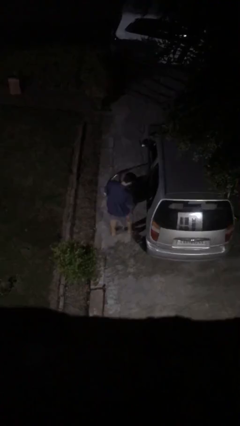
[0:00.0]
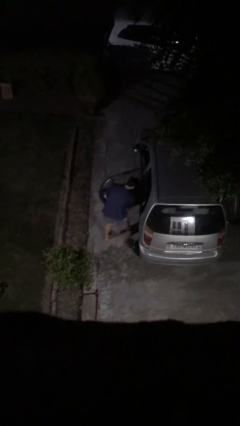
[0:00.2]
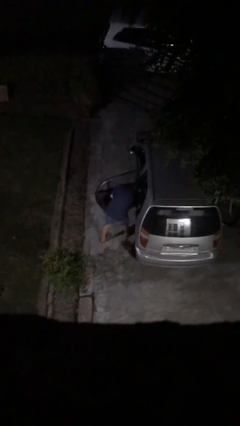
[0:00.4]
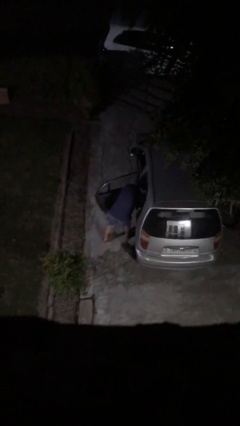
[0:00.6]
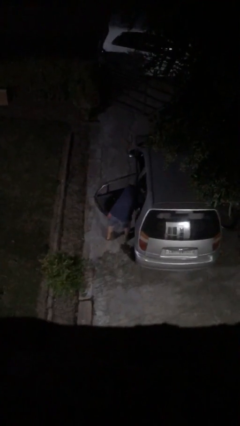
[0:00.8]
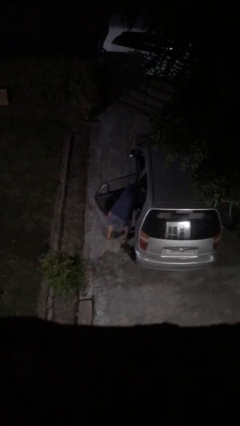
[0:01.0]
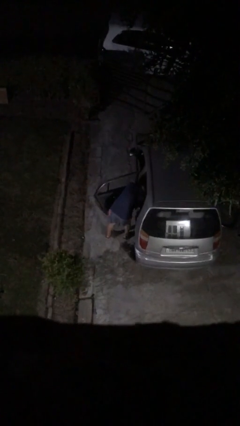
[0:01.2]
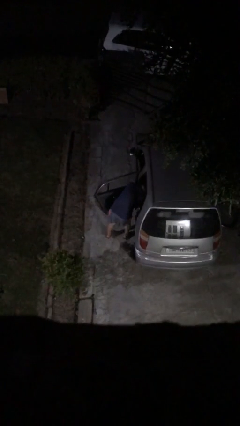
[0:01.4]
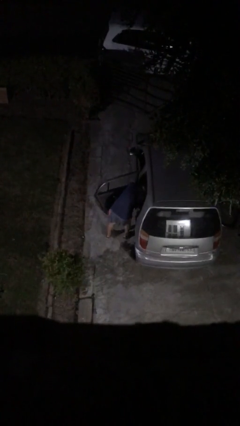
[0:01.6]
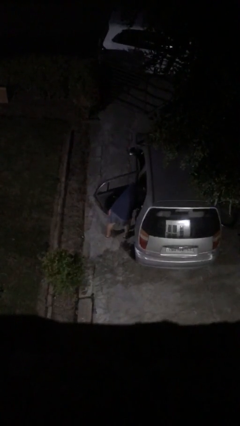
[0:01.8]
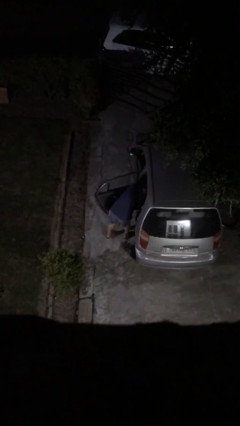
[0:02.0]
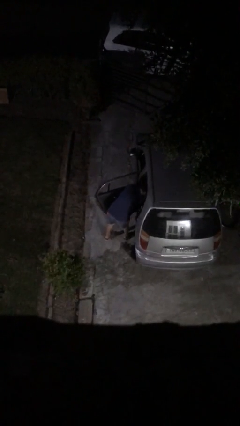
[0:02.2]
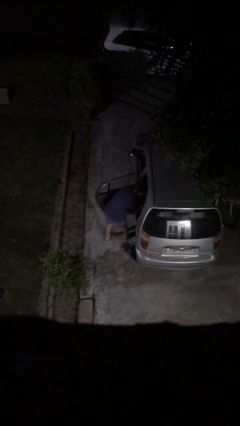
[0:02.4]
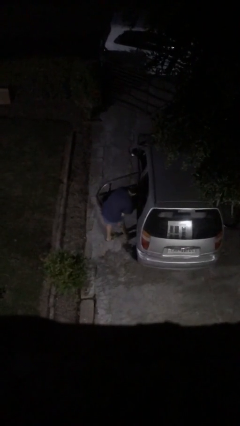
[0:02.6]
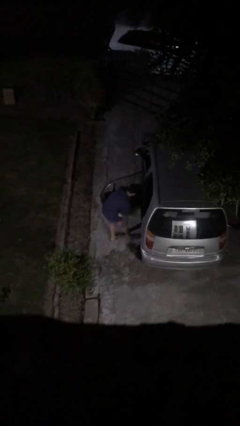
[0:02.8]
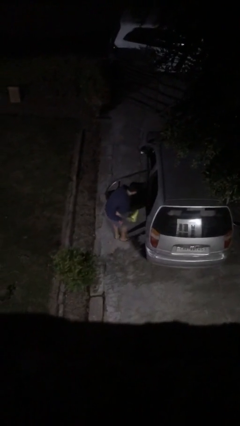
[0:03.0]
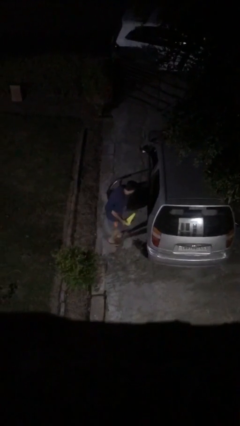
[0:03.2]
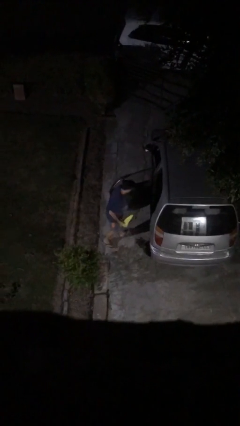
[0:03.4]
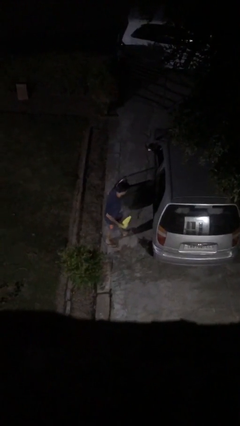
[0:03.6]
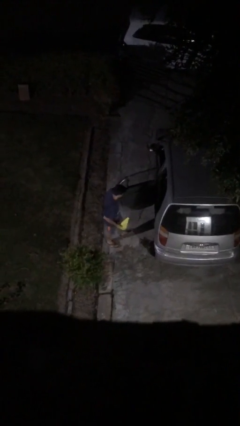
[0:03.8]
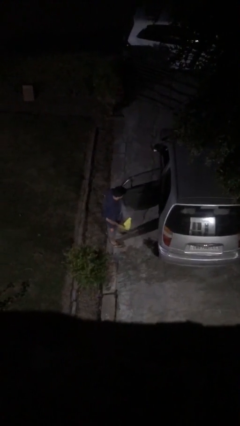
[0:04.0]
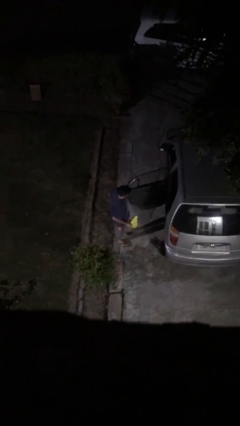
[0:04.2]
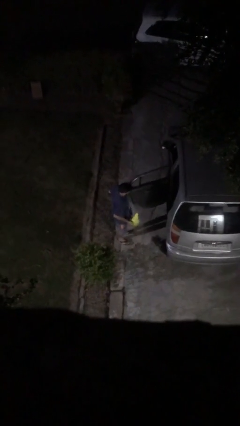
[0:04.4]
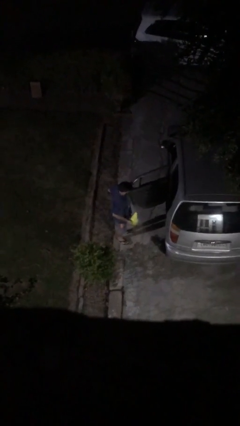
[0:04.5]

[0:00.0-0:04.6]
person unloads car

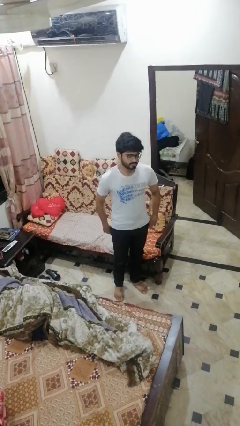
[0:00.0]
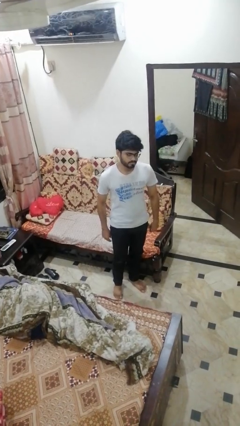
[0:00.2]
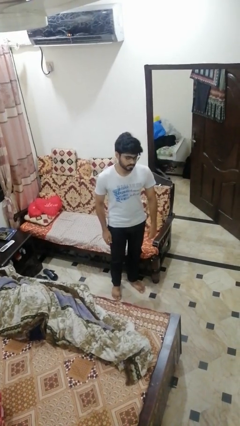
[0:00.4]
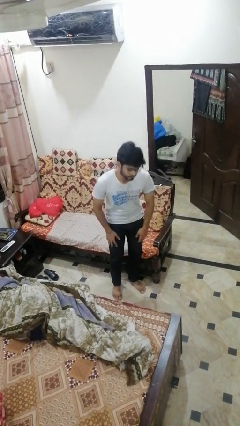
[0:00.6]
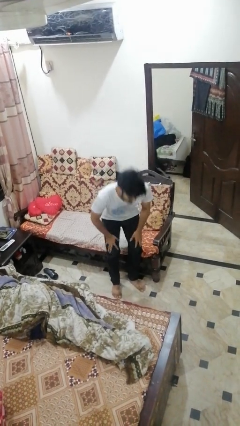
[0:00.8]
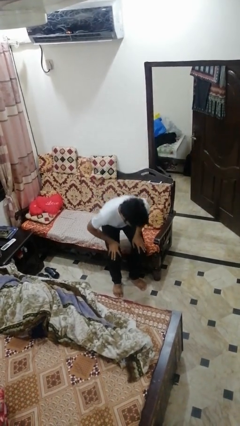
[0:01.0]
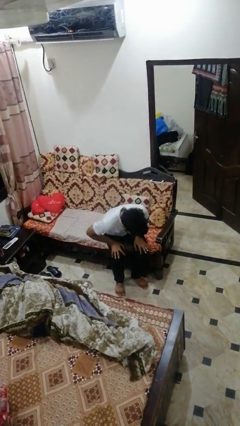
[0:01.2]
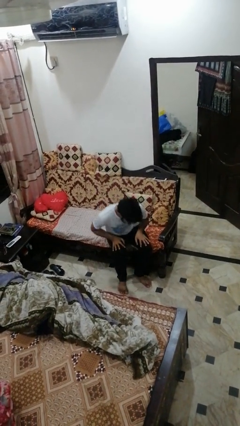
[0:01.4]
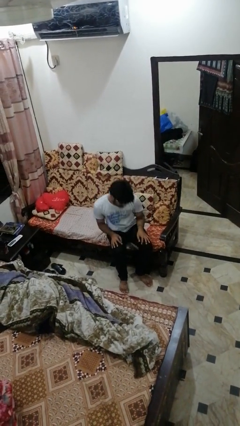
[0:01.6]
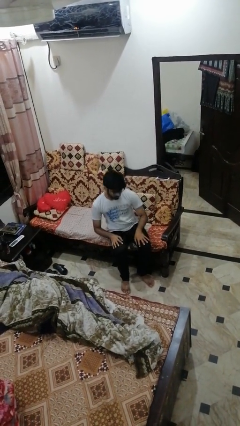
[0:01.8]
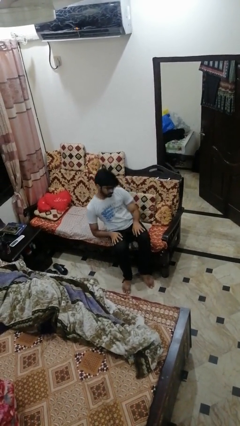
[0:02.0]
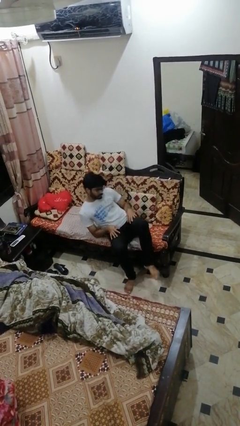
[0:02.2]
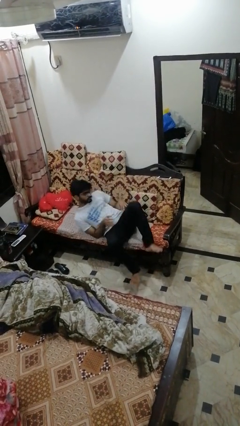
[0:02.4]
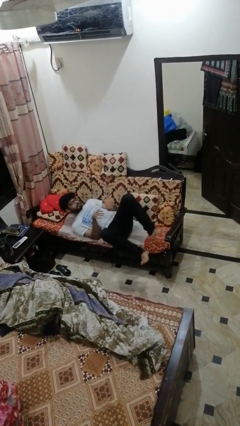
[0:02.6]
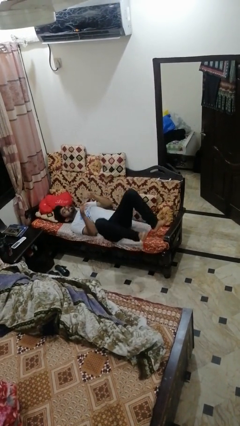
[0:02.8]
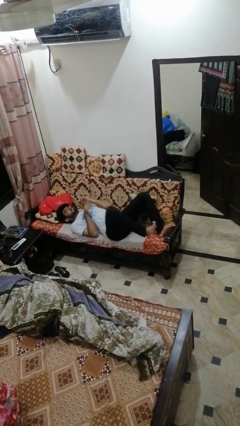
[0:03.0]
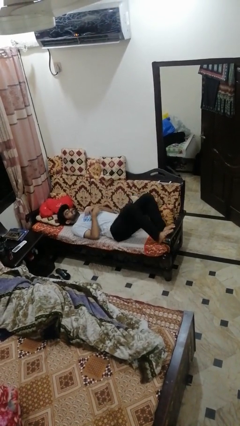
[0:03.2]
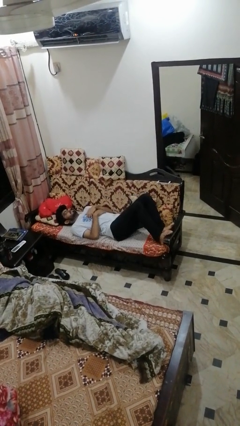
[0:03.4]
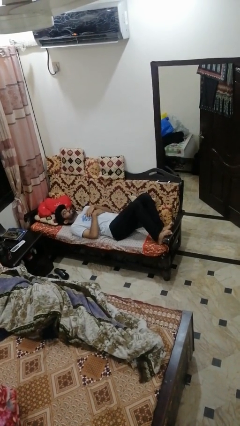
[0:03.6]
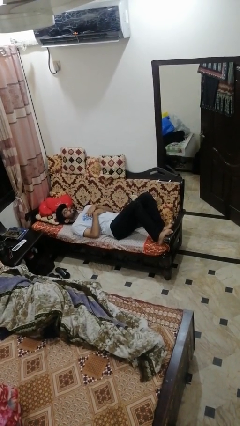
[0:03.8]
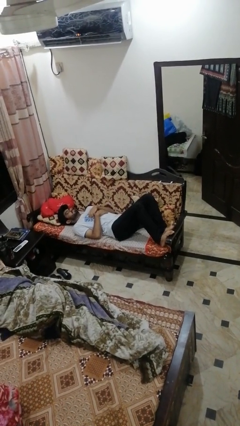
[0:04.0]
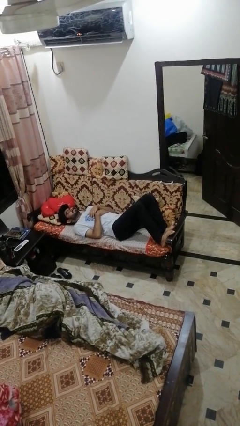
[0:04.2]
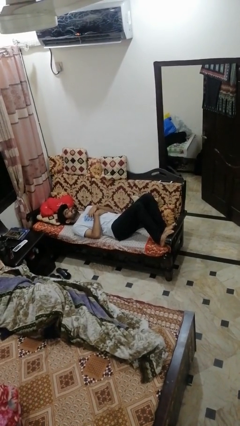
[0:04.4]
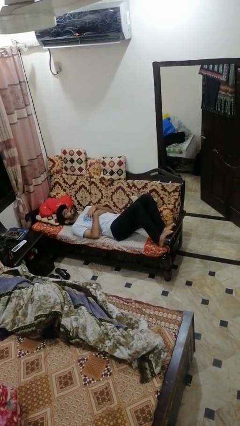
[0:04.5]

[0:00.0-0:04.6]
person lies down on couch

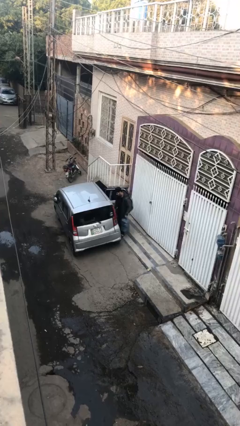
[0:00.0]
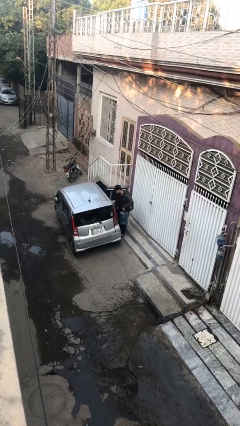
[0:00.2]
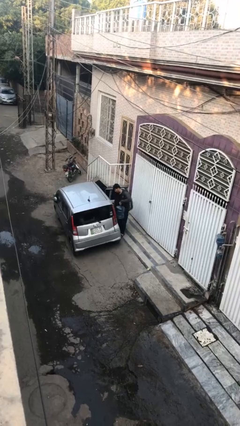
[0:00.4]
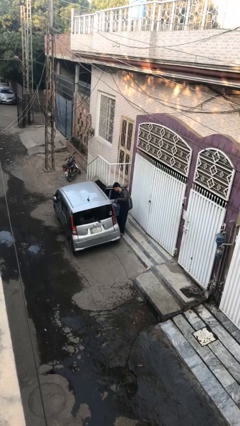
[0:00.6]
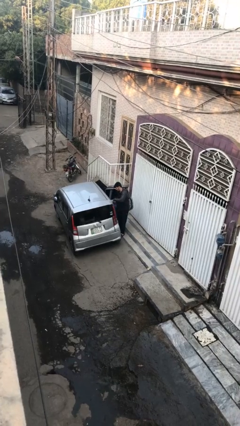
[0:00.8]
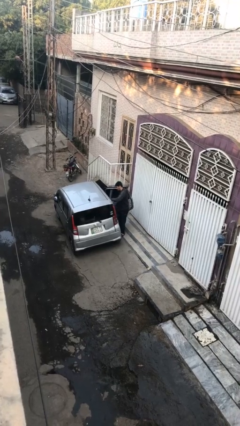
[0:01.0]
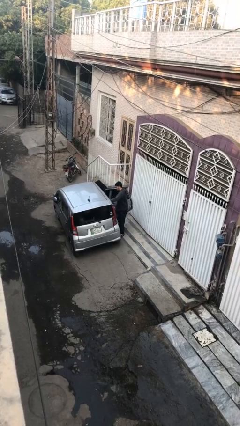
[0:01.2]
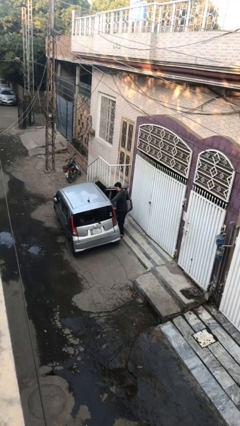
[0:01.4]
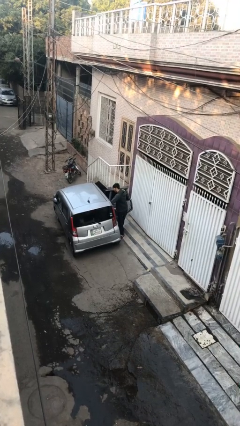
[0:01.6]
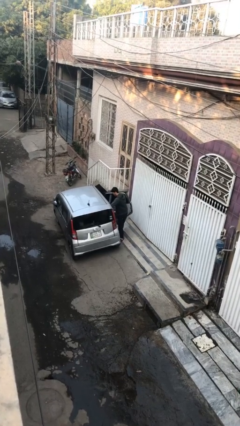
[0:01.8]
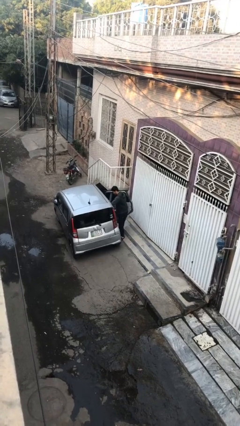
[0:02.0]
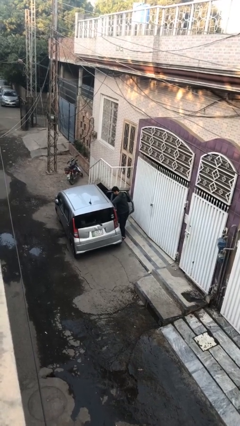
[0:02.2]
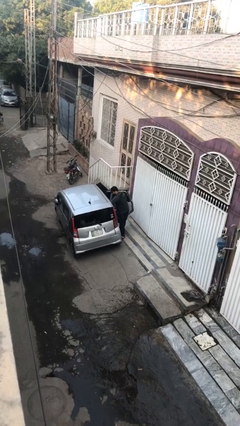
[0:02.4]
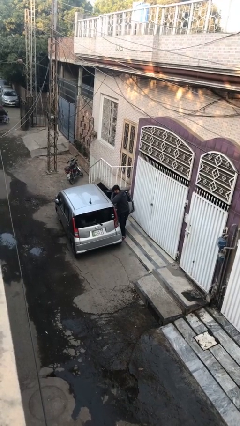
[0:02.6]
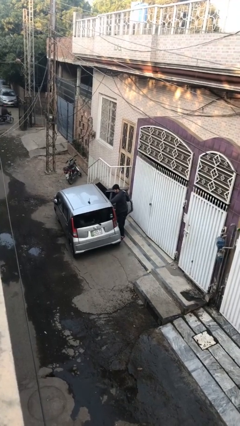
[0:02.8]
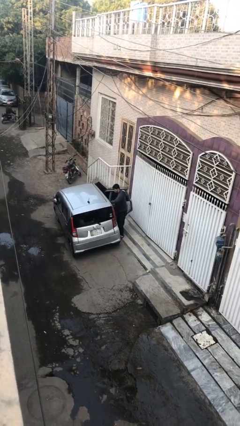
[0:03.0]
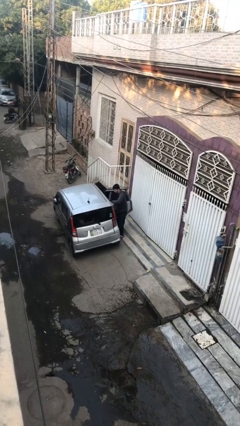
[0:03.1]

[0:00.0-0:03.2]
person loads car

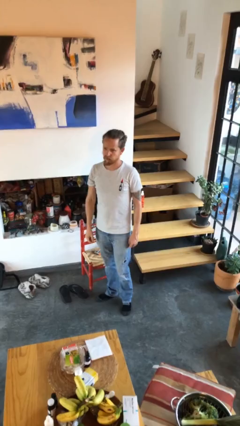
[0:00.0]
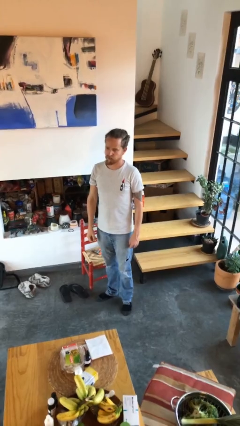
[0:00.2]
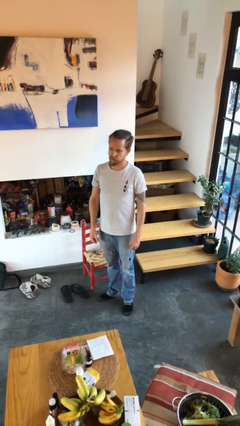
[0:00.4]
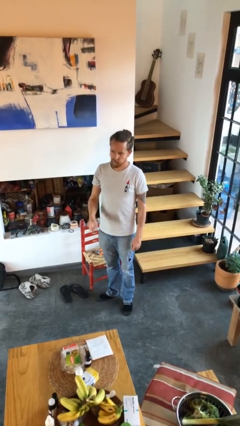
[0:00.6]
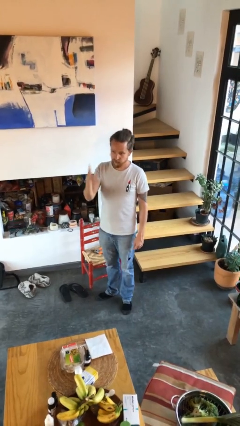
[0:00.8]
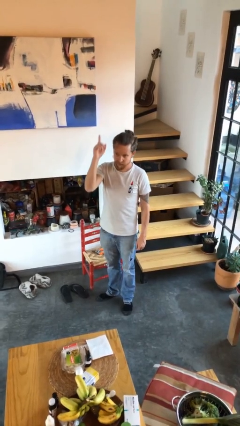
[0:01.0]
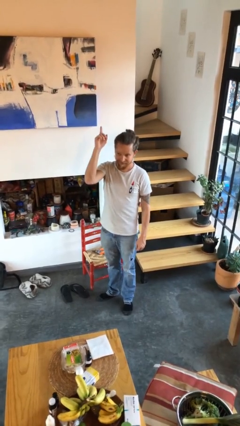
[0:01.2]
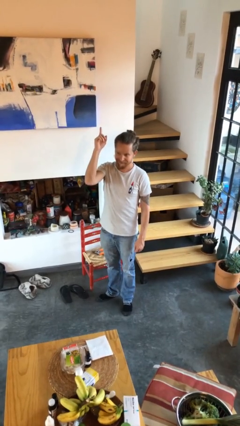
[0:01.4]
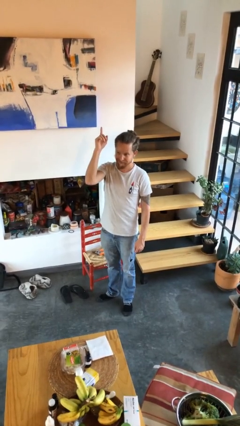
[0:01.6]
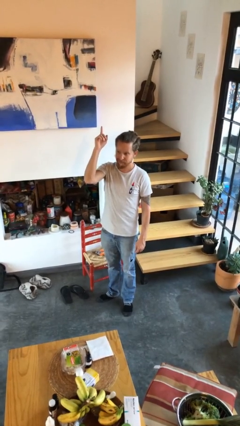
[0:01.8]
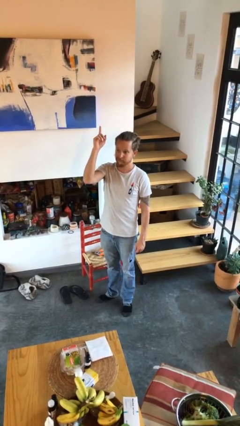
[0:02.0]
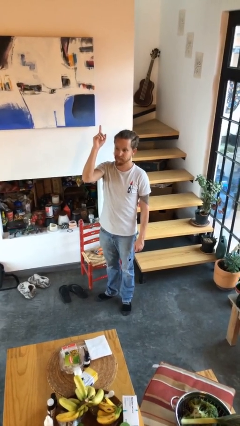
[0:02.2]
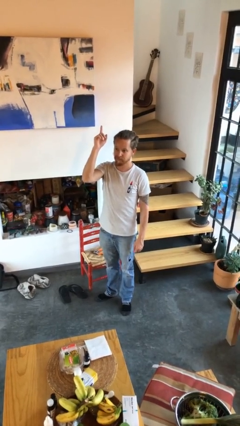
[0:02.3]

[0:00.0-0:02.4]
person gestures raise hand

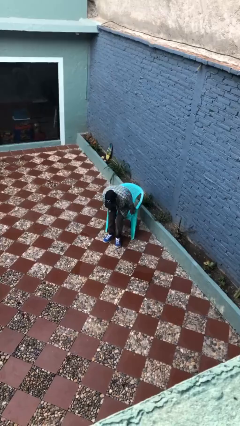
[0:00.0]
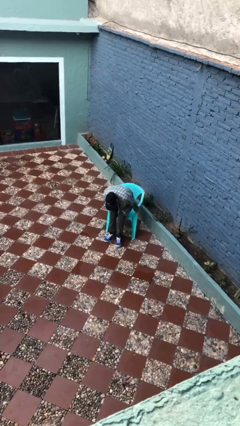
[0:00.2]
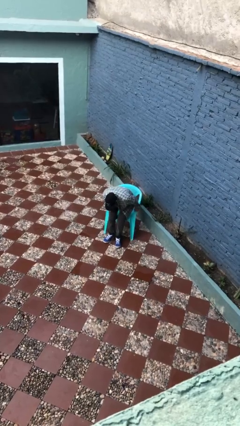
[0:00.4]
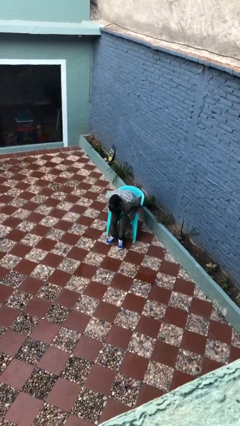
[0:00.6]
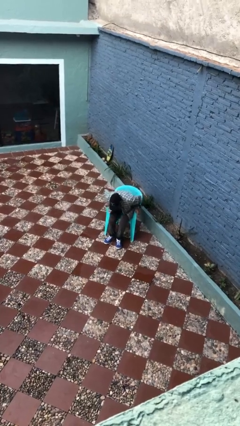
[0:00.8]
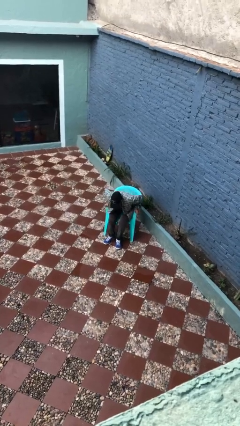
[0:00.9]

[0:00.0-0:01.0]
person sits down

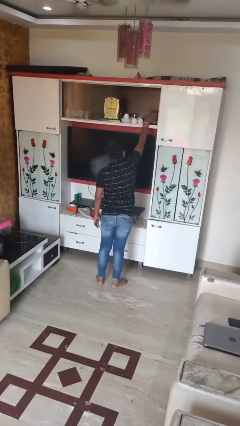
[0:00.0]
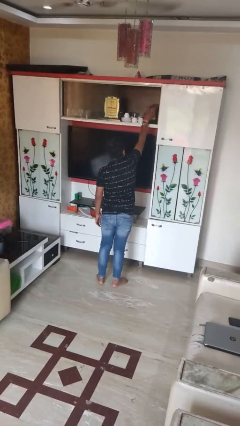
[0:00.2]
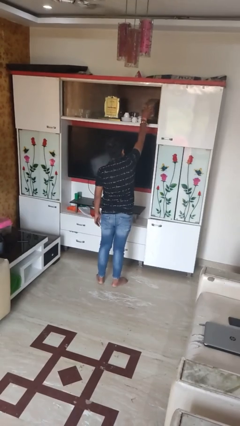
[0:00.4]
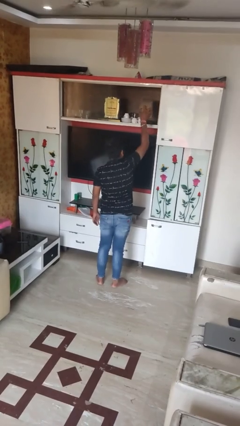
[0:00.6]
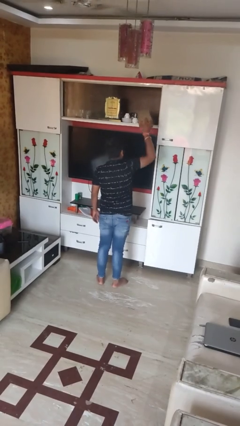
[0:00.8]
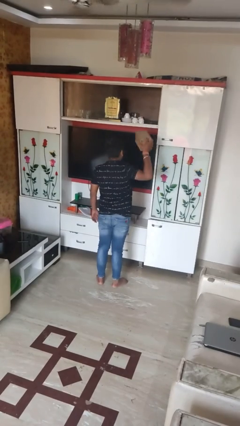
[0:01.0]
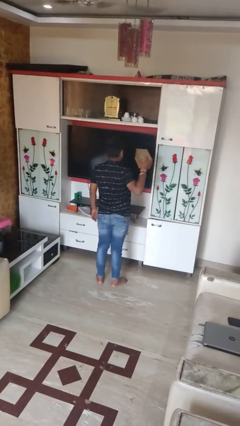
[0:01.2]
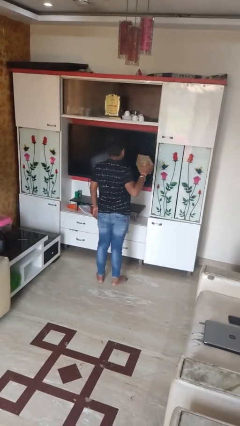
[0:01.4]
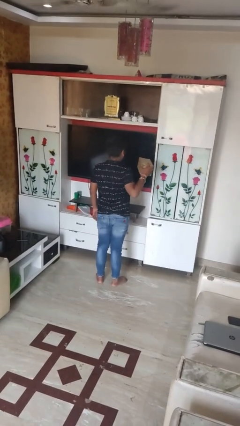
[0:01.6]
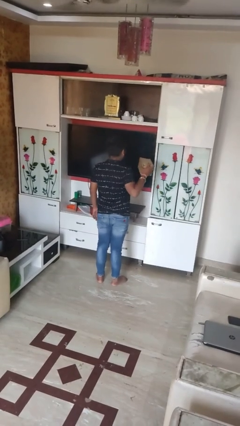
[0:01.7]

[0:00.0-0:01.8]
person picks up object from shelf
